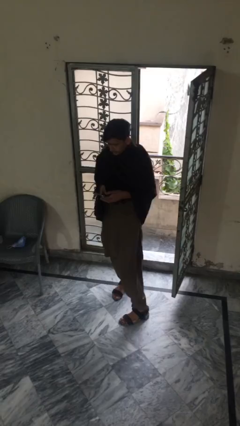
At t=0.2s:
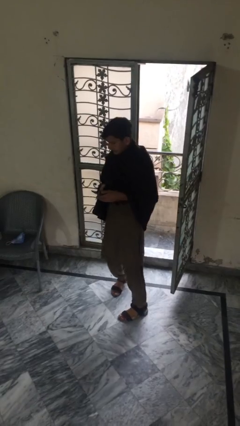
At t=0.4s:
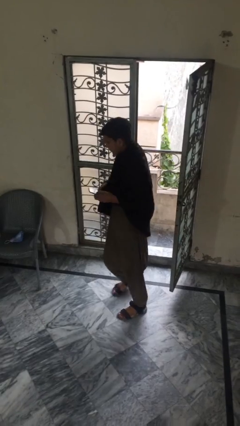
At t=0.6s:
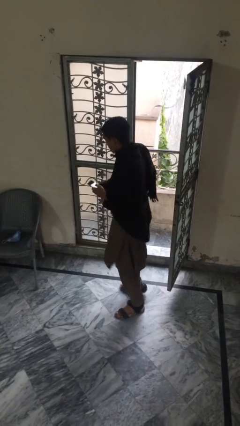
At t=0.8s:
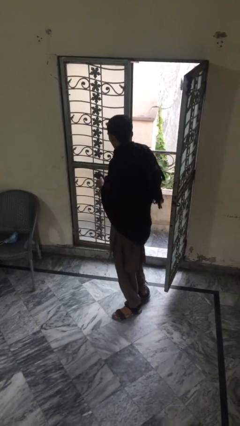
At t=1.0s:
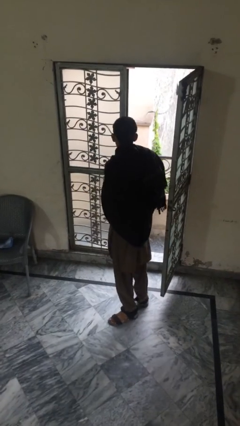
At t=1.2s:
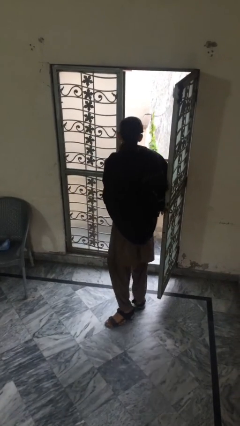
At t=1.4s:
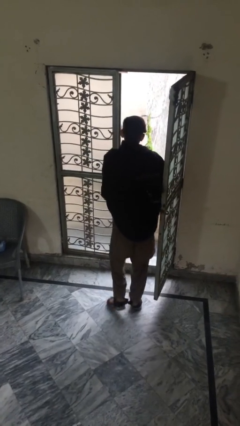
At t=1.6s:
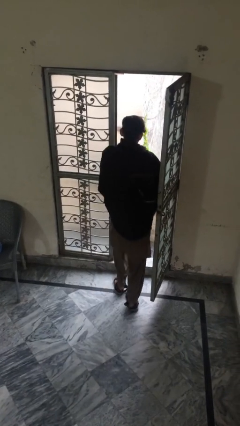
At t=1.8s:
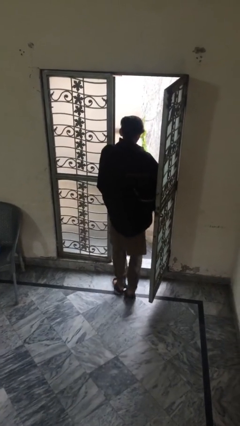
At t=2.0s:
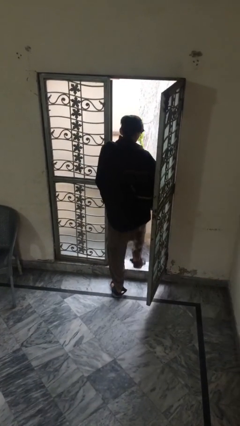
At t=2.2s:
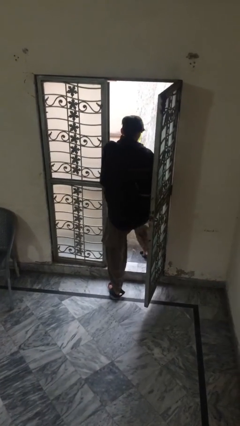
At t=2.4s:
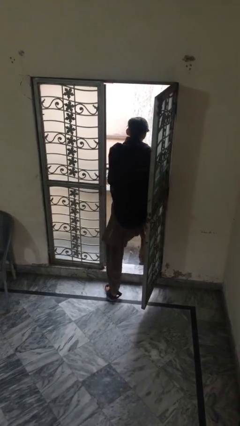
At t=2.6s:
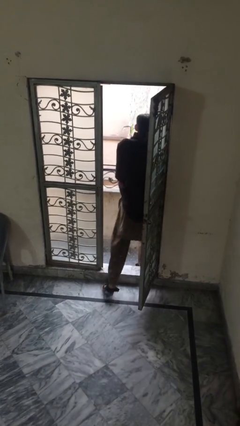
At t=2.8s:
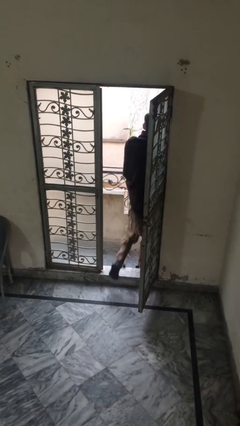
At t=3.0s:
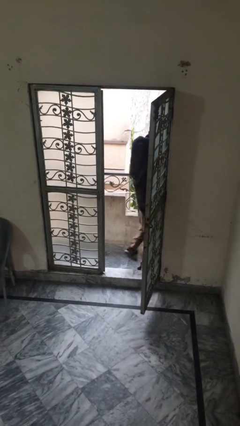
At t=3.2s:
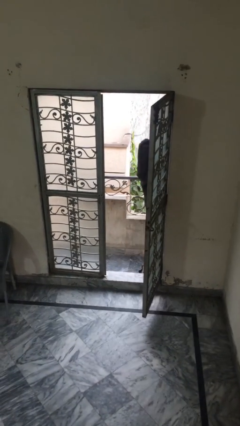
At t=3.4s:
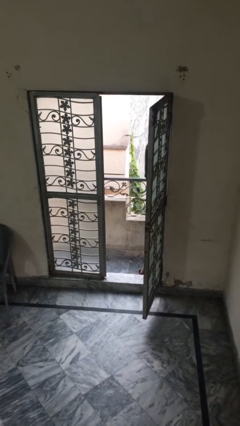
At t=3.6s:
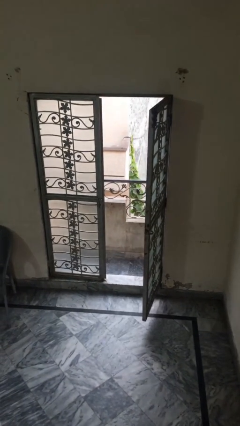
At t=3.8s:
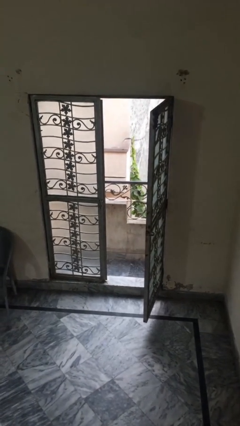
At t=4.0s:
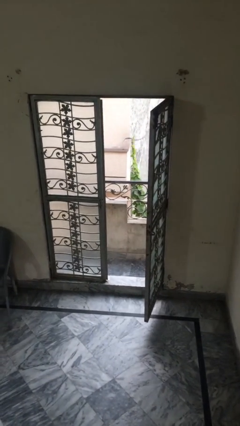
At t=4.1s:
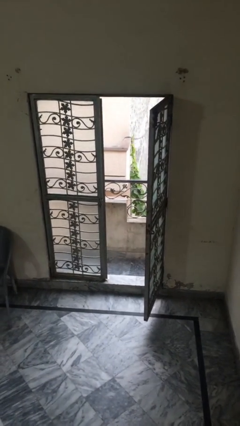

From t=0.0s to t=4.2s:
person exits scene through structure

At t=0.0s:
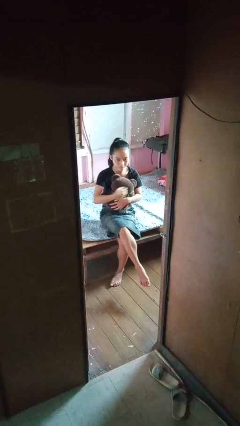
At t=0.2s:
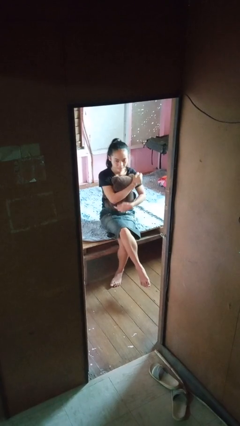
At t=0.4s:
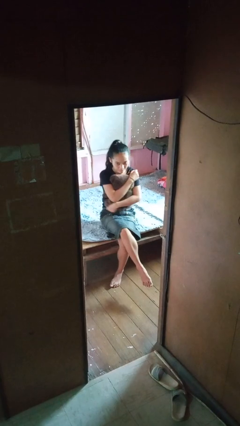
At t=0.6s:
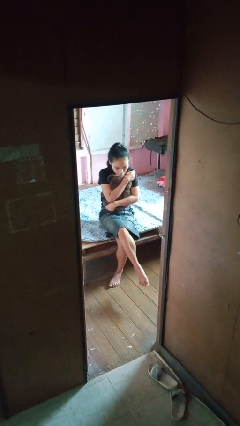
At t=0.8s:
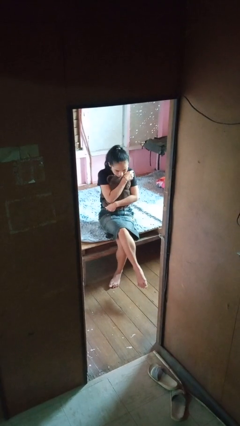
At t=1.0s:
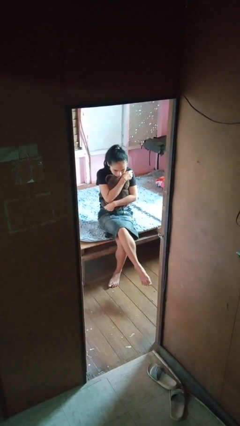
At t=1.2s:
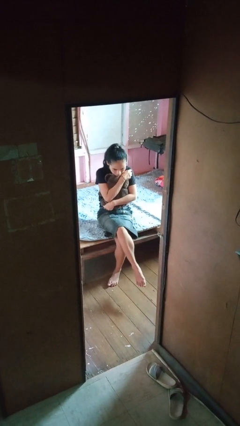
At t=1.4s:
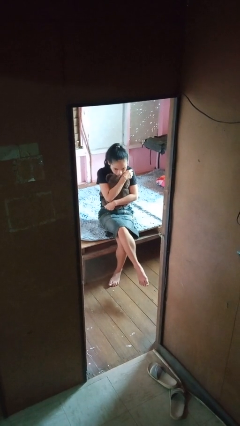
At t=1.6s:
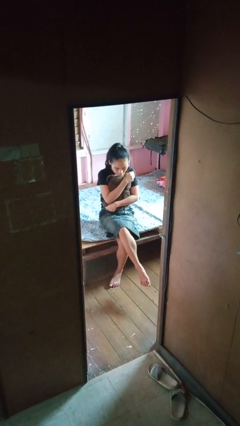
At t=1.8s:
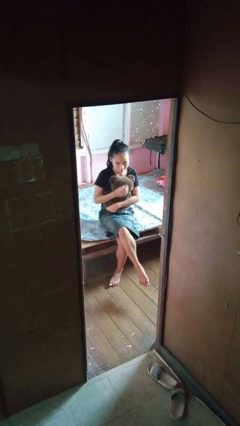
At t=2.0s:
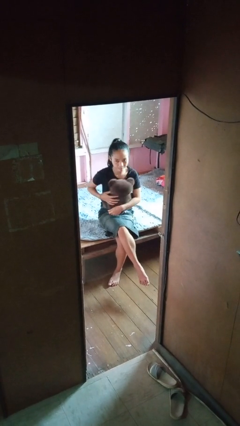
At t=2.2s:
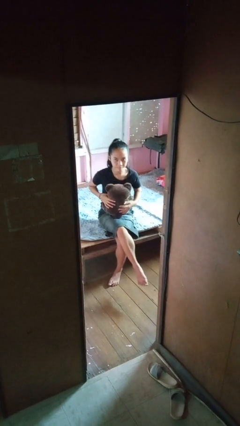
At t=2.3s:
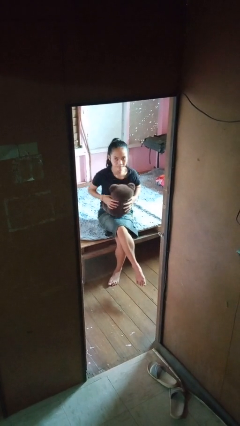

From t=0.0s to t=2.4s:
person hugs stuffed animal

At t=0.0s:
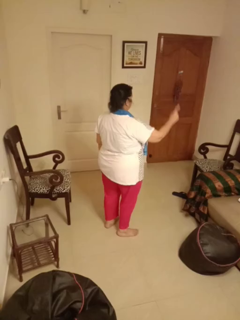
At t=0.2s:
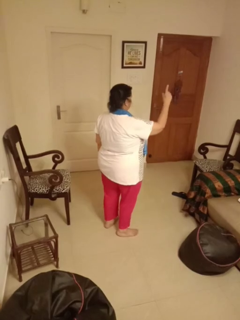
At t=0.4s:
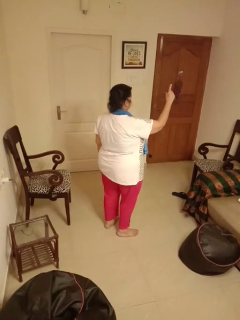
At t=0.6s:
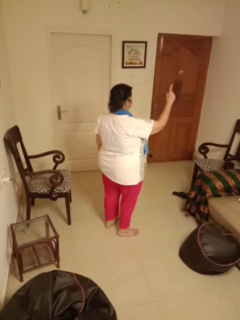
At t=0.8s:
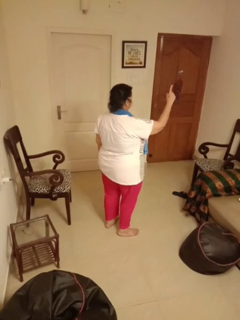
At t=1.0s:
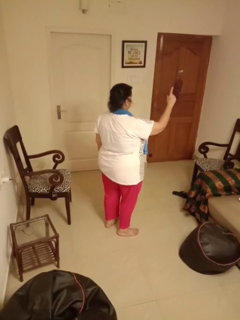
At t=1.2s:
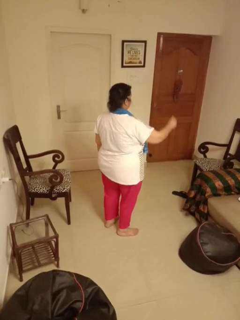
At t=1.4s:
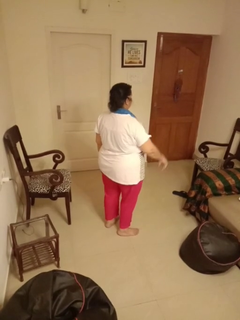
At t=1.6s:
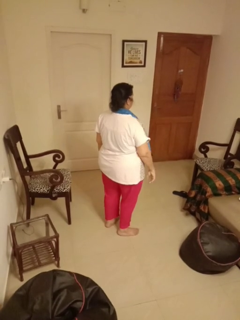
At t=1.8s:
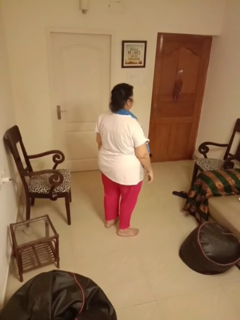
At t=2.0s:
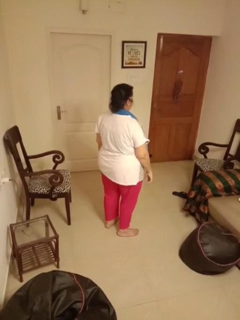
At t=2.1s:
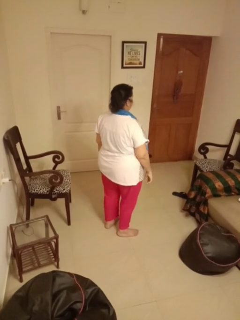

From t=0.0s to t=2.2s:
person gestures number one

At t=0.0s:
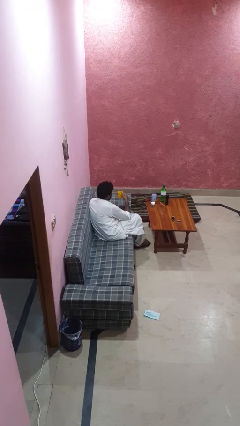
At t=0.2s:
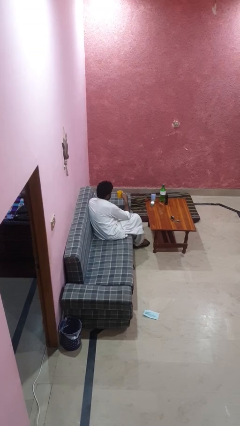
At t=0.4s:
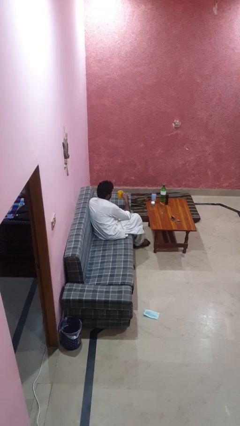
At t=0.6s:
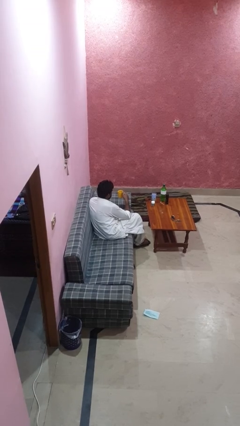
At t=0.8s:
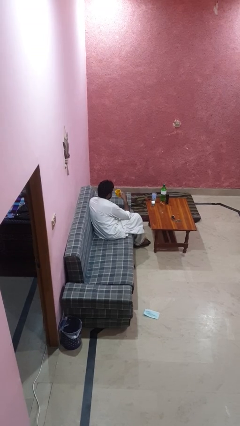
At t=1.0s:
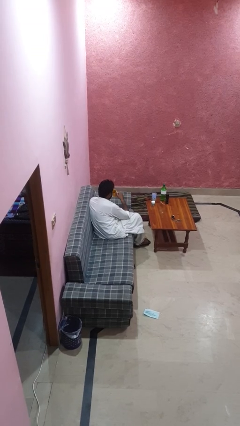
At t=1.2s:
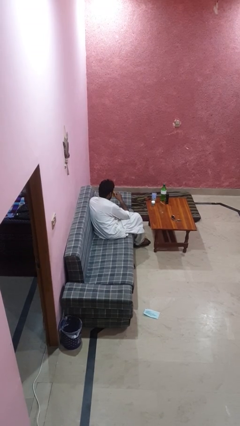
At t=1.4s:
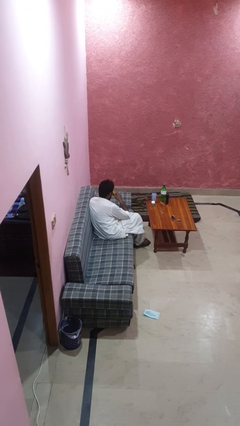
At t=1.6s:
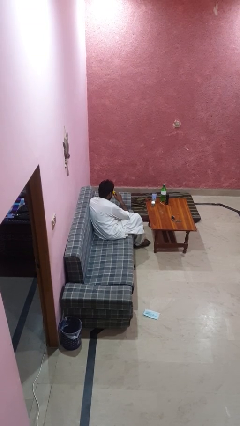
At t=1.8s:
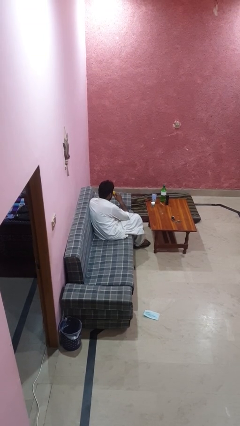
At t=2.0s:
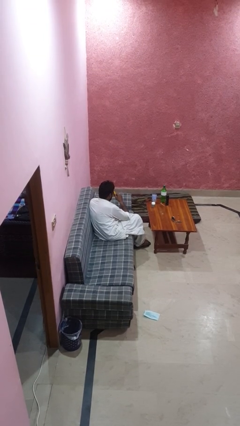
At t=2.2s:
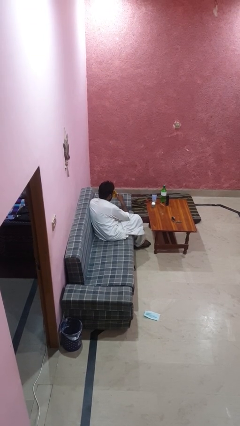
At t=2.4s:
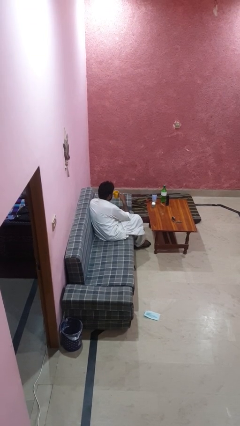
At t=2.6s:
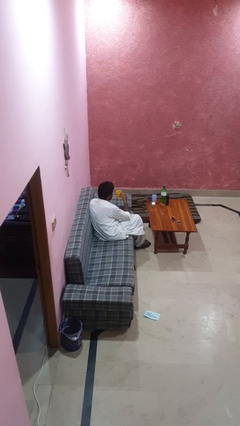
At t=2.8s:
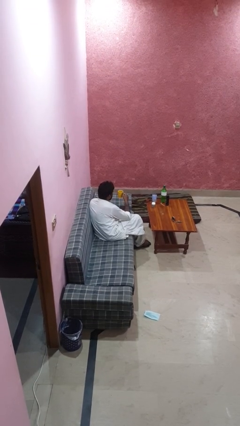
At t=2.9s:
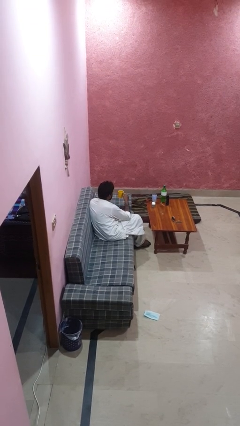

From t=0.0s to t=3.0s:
person drinks from mug

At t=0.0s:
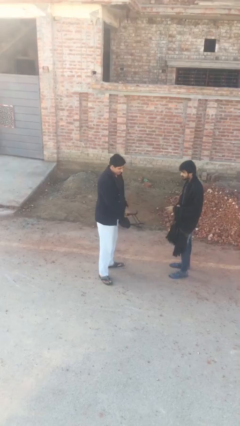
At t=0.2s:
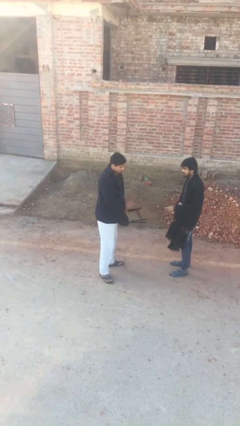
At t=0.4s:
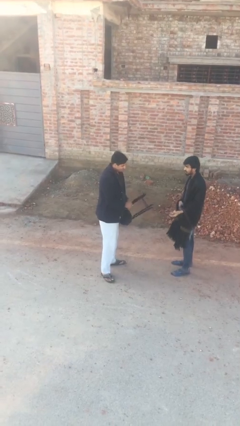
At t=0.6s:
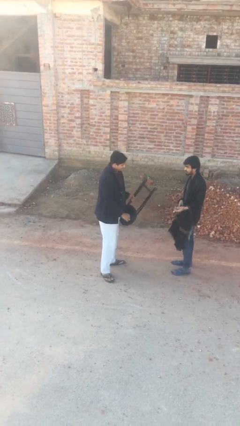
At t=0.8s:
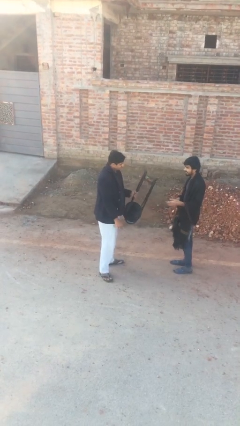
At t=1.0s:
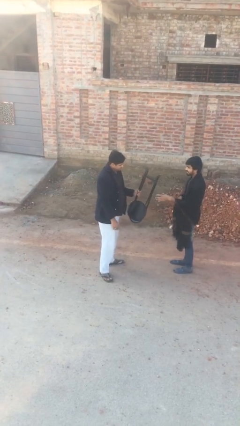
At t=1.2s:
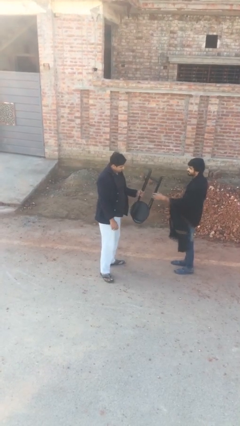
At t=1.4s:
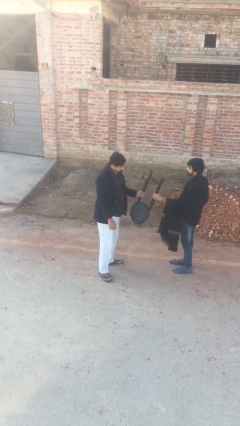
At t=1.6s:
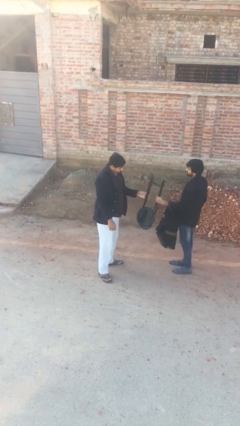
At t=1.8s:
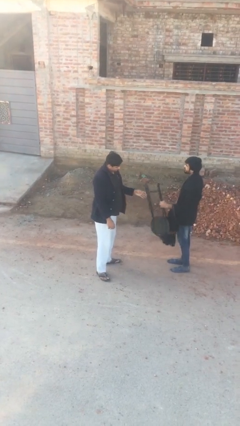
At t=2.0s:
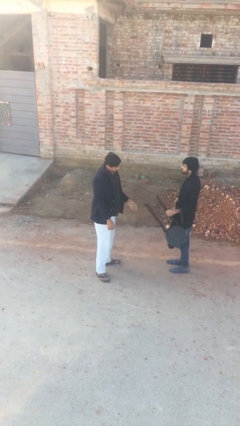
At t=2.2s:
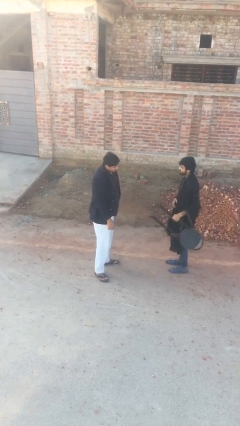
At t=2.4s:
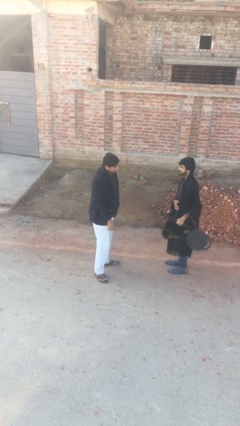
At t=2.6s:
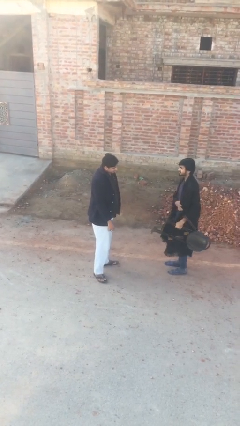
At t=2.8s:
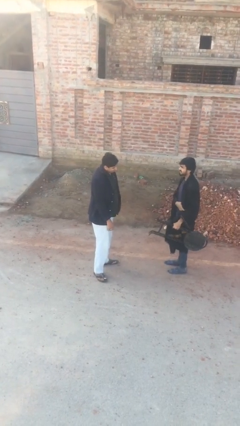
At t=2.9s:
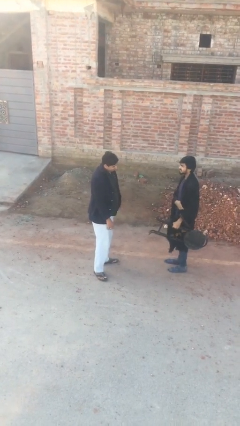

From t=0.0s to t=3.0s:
person transfers object to person

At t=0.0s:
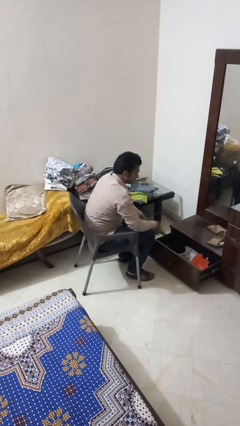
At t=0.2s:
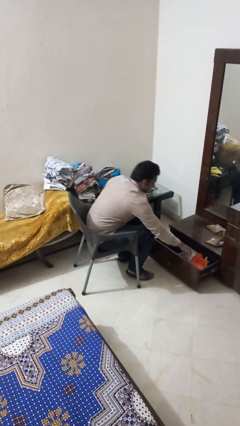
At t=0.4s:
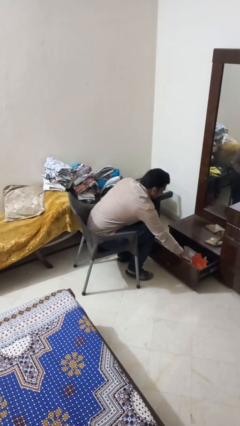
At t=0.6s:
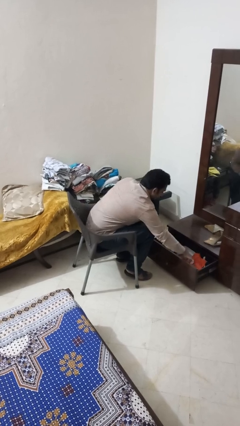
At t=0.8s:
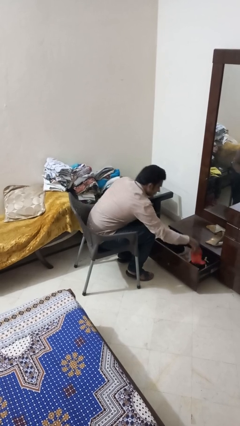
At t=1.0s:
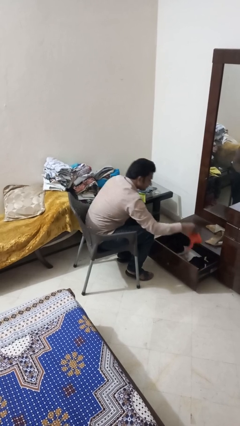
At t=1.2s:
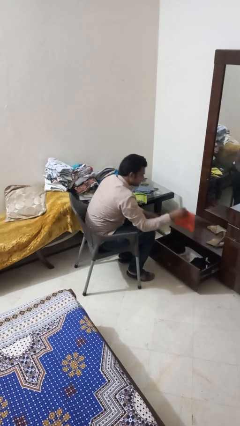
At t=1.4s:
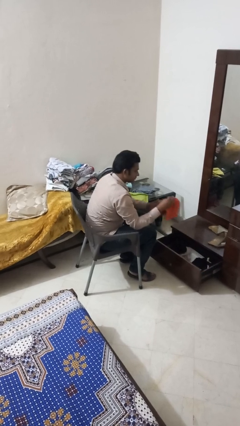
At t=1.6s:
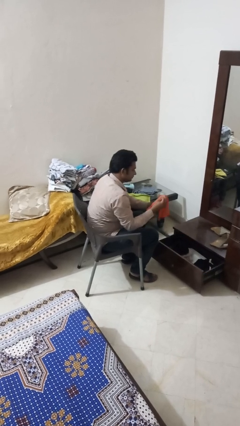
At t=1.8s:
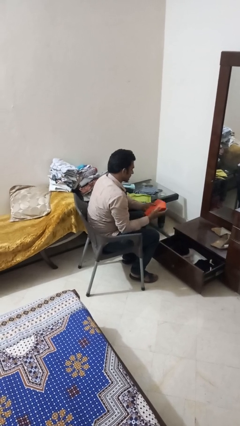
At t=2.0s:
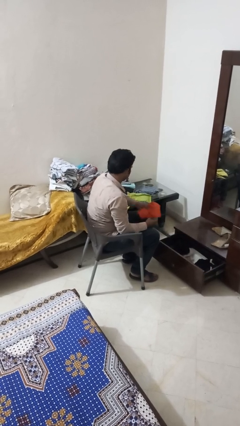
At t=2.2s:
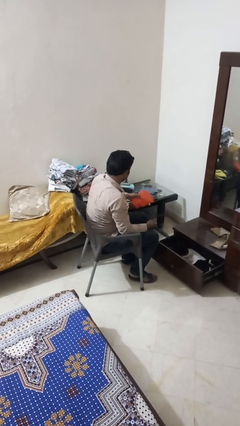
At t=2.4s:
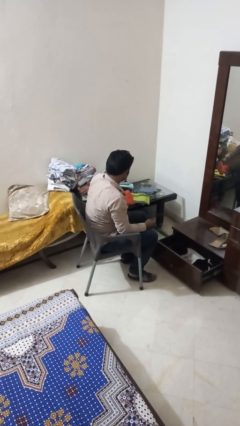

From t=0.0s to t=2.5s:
person takes clothes from dresser

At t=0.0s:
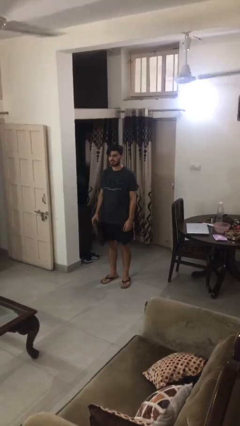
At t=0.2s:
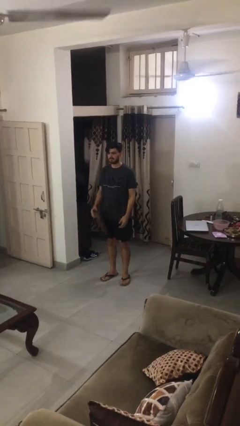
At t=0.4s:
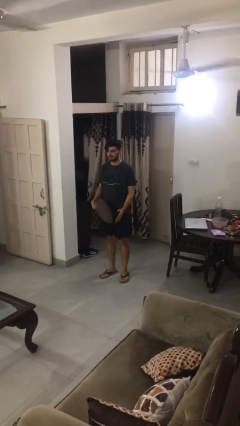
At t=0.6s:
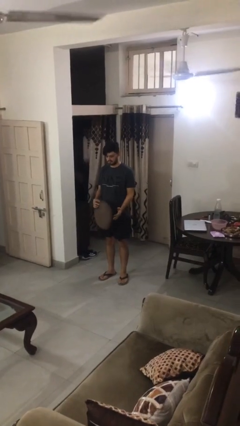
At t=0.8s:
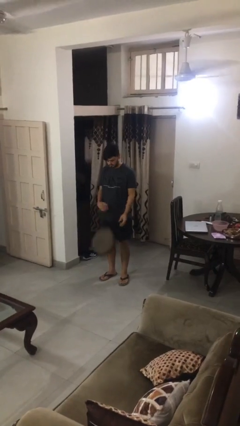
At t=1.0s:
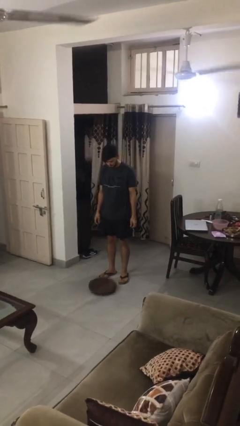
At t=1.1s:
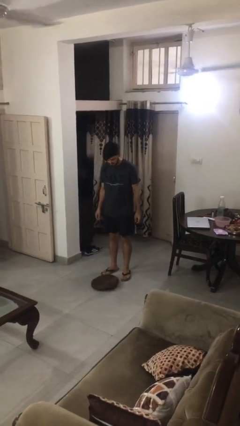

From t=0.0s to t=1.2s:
person drops object
